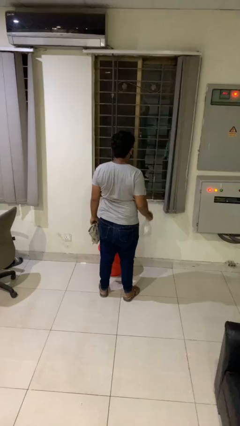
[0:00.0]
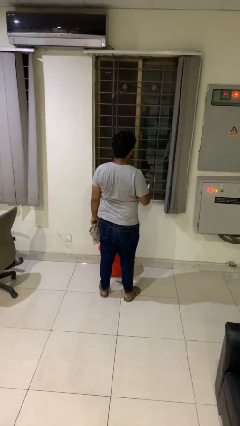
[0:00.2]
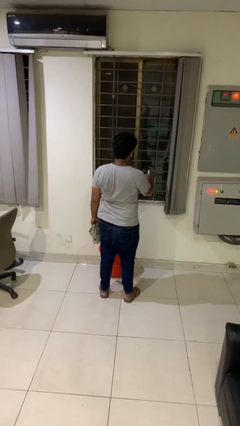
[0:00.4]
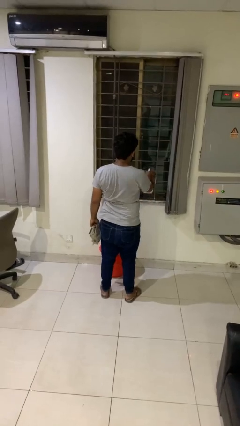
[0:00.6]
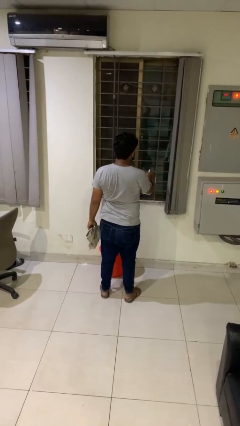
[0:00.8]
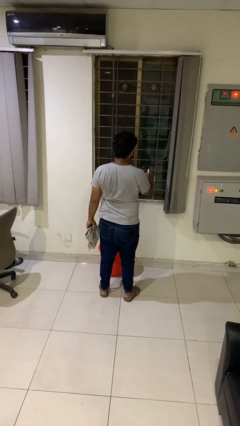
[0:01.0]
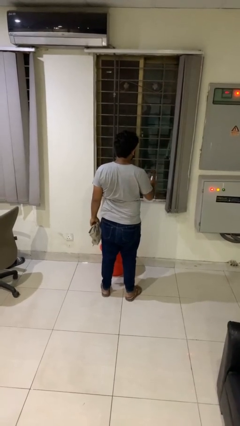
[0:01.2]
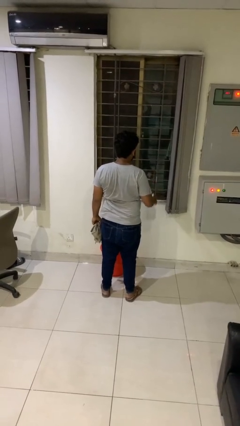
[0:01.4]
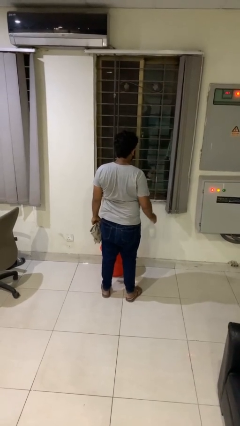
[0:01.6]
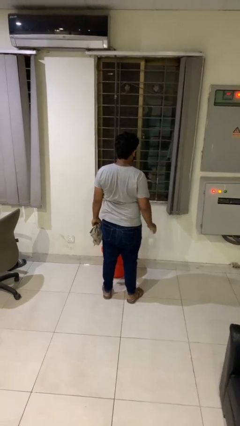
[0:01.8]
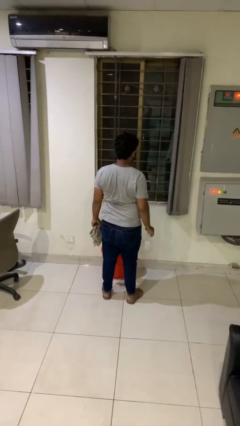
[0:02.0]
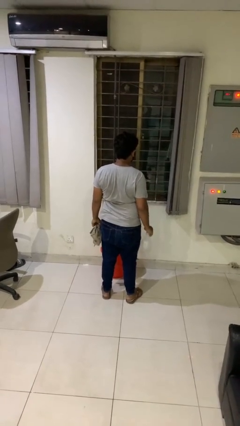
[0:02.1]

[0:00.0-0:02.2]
person sprays from bottle

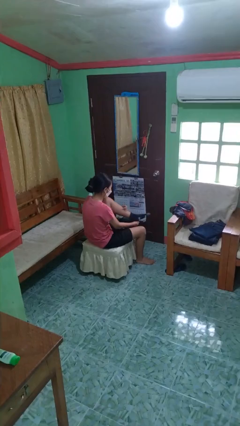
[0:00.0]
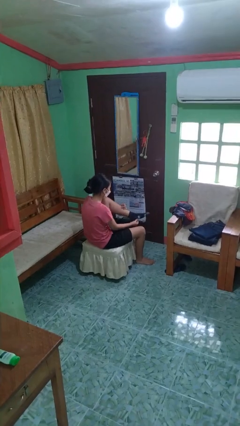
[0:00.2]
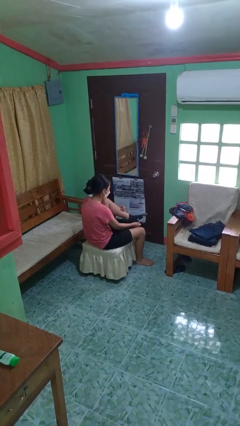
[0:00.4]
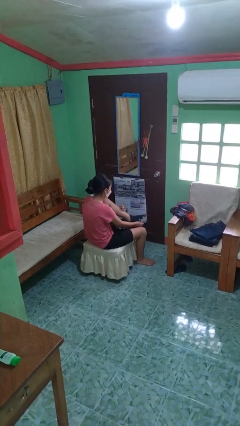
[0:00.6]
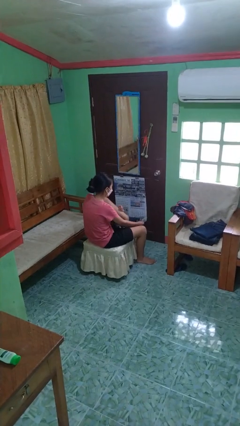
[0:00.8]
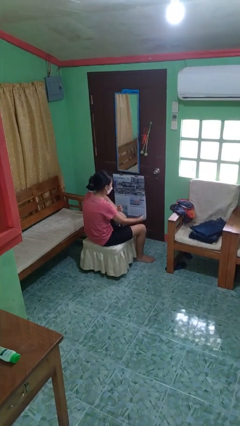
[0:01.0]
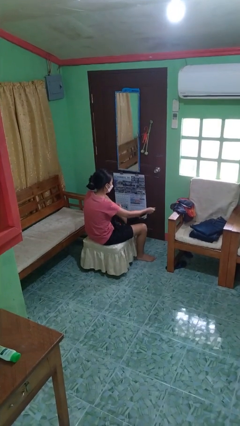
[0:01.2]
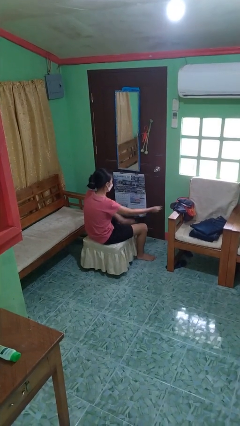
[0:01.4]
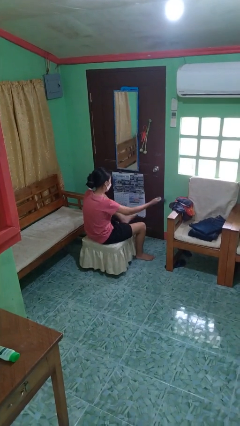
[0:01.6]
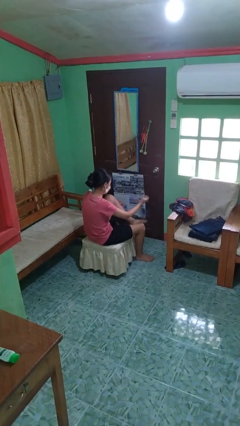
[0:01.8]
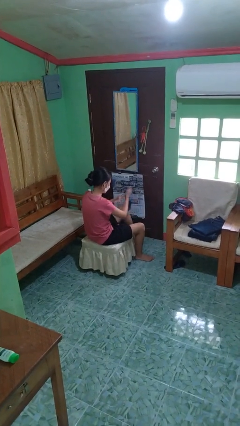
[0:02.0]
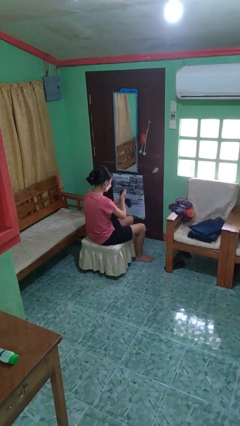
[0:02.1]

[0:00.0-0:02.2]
person takes off socks

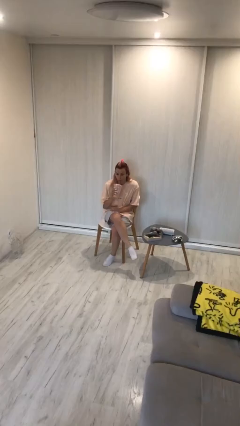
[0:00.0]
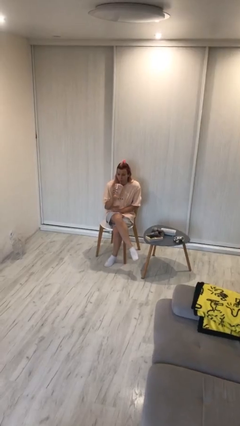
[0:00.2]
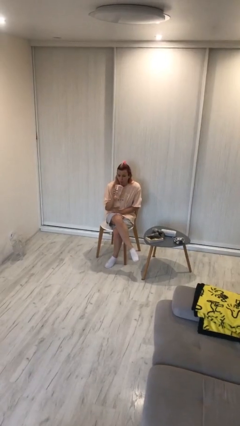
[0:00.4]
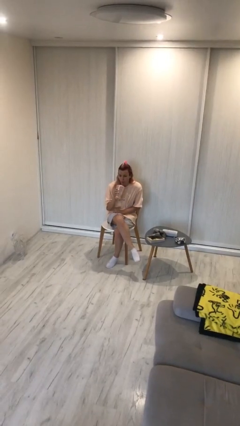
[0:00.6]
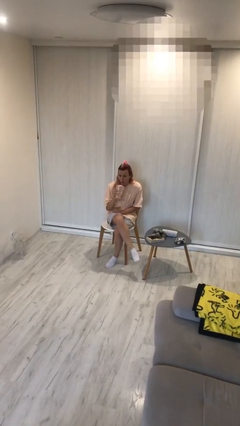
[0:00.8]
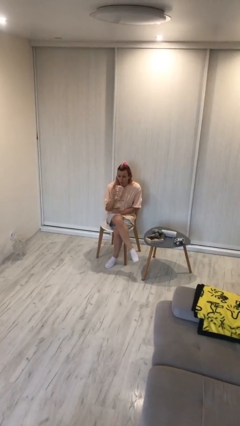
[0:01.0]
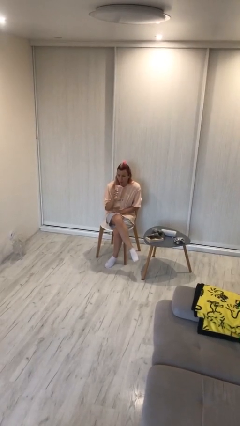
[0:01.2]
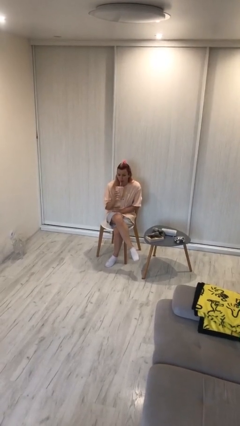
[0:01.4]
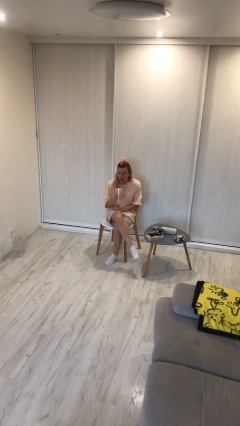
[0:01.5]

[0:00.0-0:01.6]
person drinks from straw

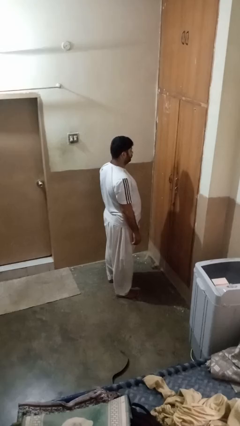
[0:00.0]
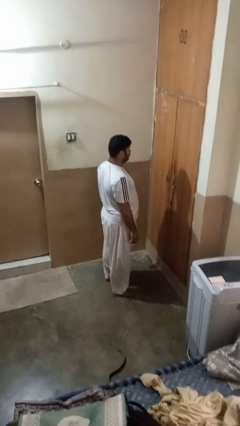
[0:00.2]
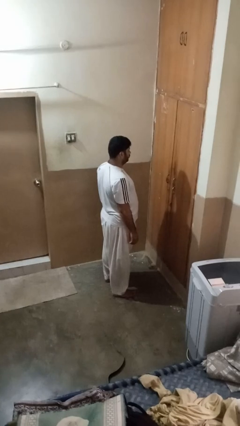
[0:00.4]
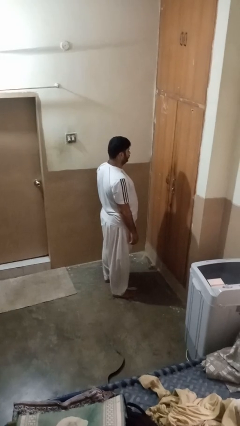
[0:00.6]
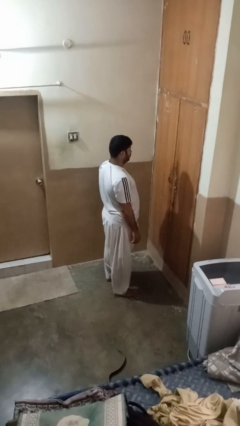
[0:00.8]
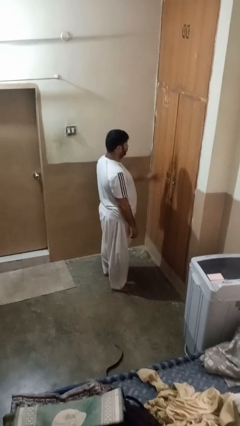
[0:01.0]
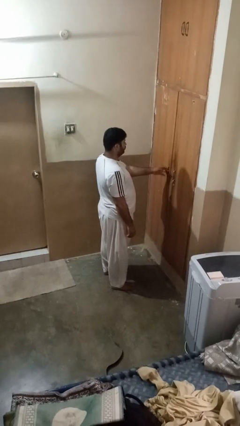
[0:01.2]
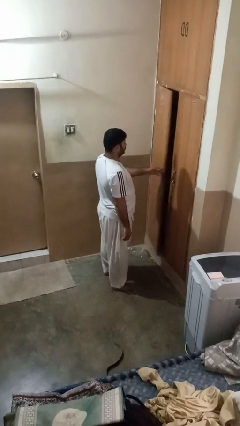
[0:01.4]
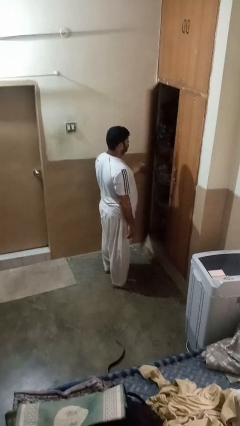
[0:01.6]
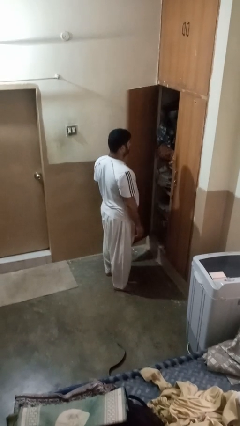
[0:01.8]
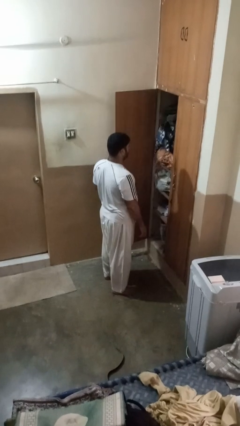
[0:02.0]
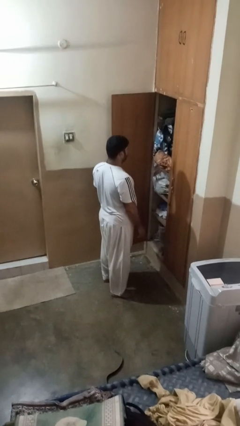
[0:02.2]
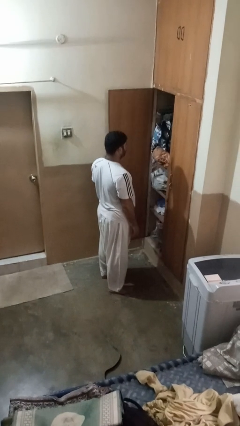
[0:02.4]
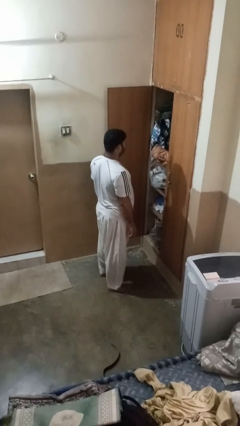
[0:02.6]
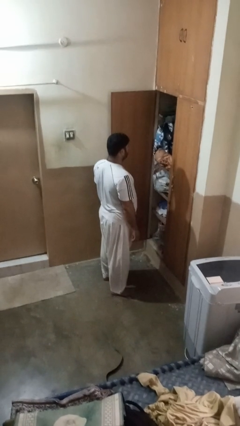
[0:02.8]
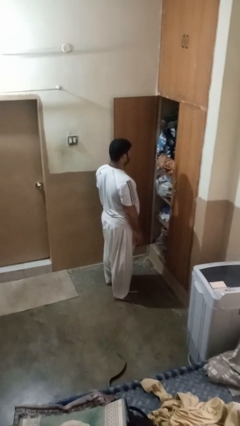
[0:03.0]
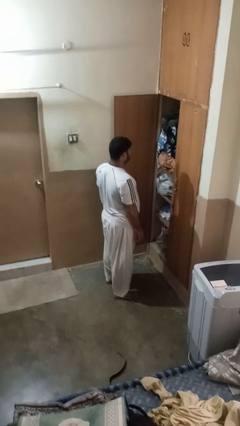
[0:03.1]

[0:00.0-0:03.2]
person opens closet door

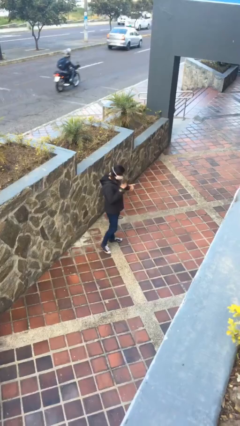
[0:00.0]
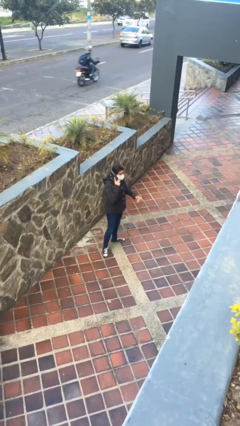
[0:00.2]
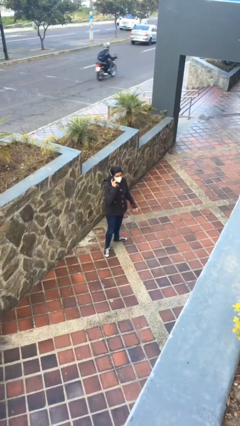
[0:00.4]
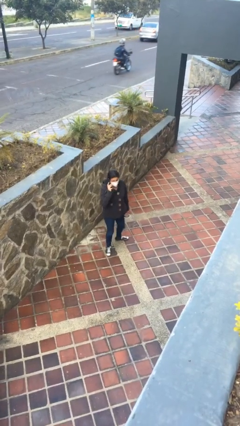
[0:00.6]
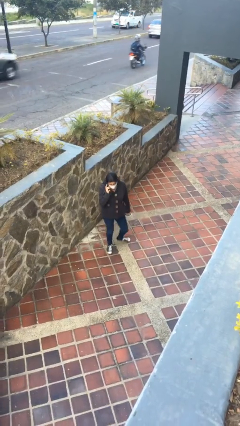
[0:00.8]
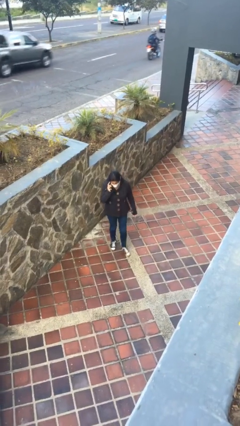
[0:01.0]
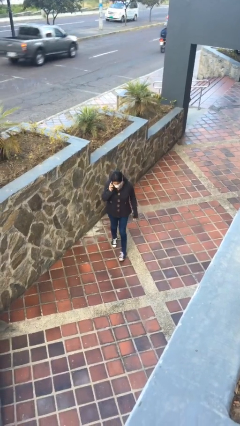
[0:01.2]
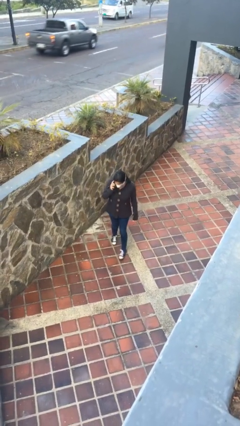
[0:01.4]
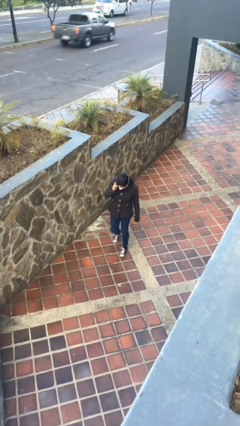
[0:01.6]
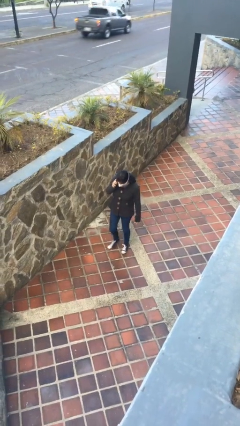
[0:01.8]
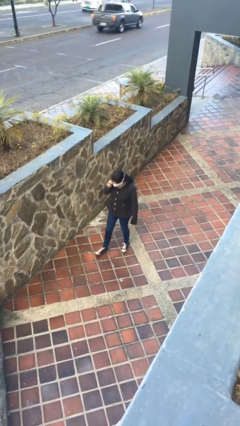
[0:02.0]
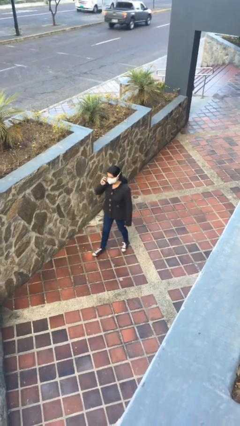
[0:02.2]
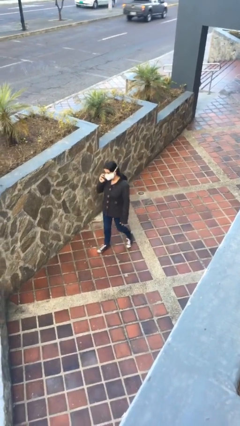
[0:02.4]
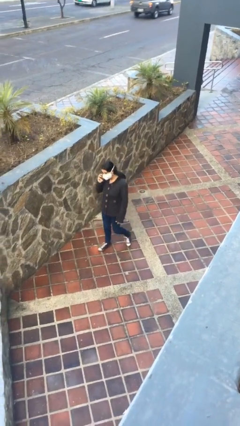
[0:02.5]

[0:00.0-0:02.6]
person talks on phone

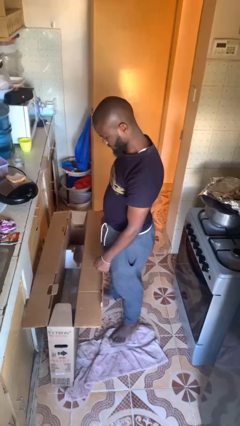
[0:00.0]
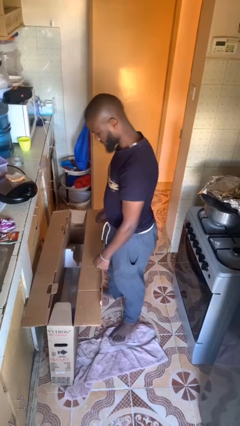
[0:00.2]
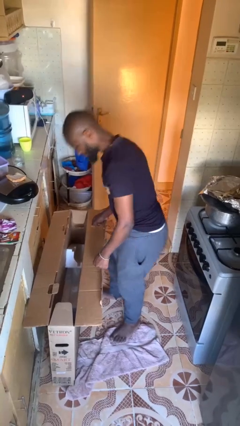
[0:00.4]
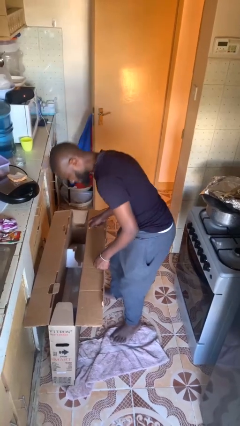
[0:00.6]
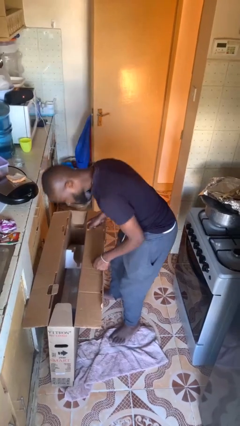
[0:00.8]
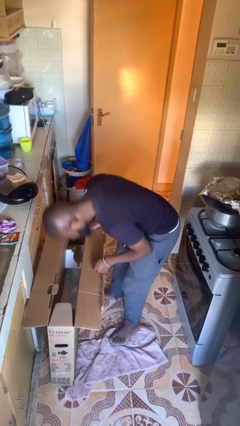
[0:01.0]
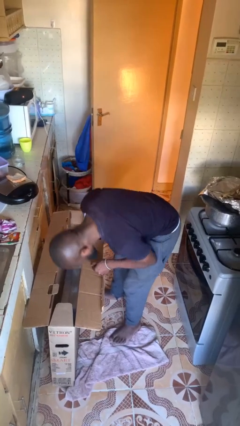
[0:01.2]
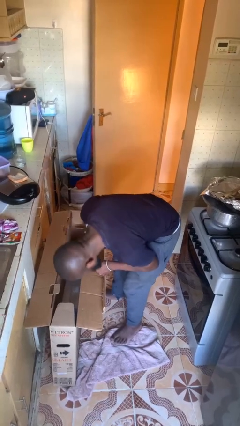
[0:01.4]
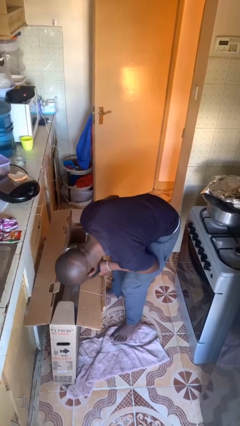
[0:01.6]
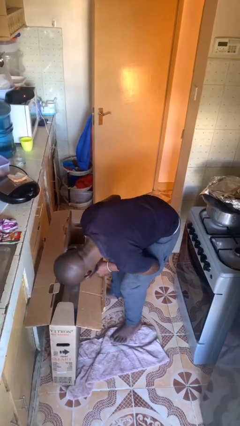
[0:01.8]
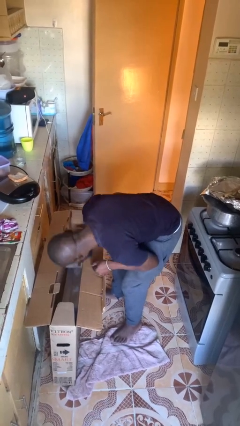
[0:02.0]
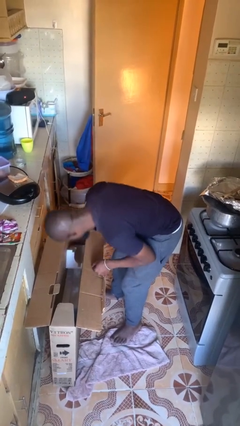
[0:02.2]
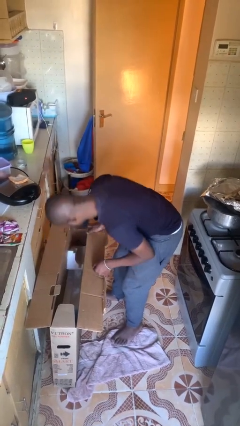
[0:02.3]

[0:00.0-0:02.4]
person searches in box

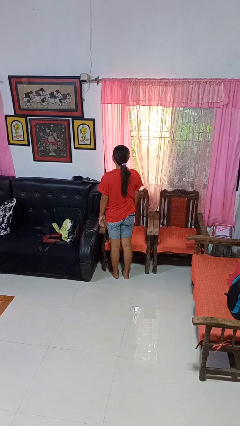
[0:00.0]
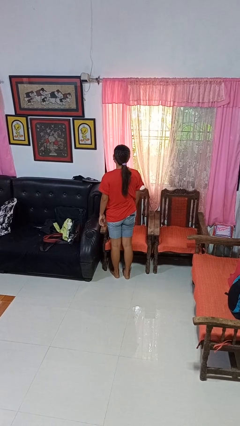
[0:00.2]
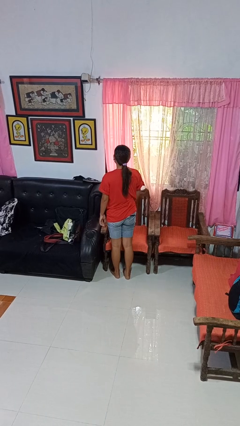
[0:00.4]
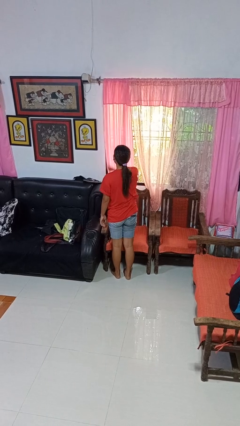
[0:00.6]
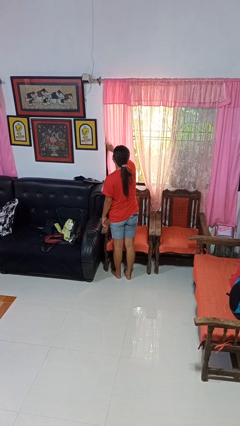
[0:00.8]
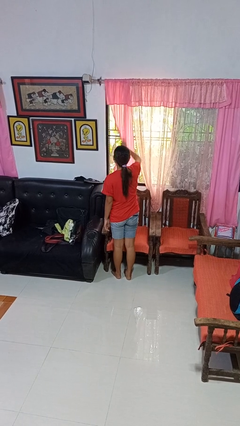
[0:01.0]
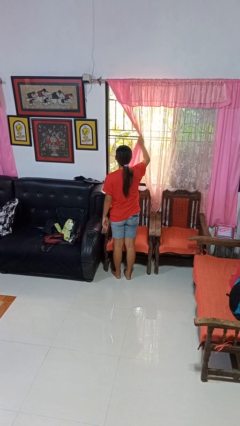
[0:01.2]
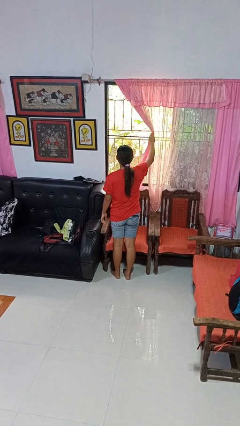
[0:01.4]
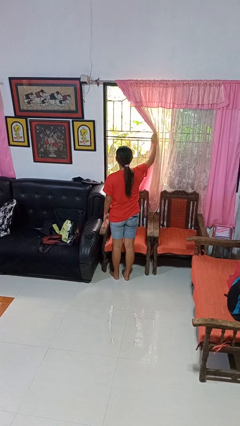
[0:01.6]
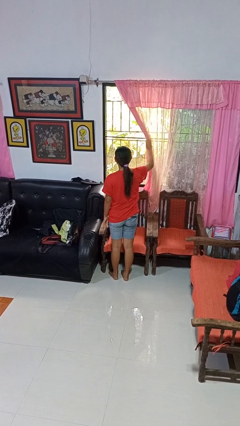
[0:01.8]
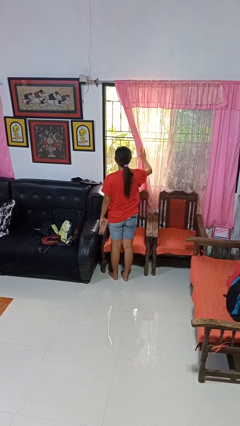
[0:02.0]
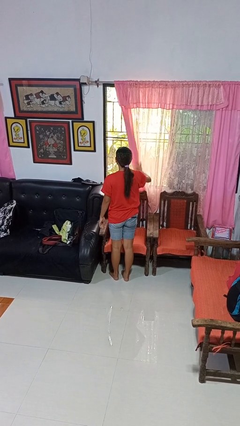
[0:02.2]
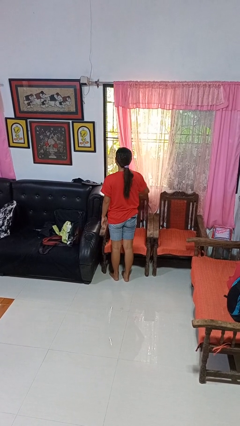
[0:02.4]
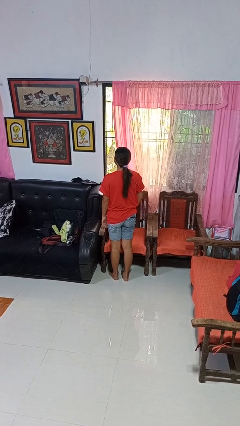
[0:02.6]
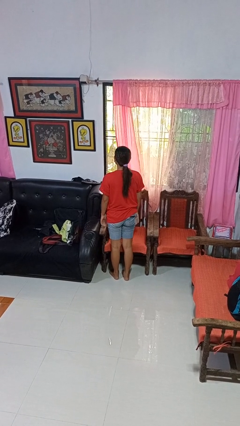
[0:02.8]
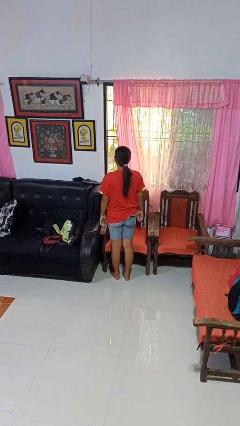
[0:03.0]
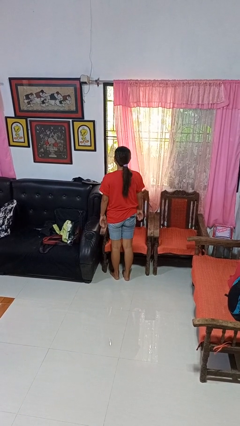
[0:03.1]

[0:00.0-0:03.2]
person opens curtains
